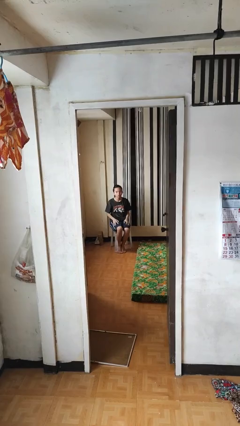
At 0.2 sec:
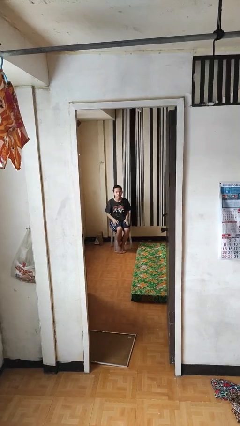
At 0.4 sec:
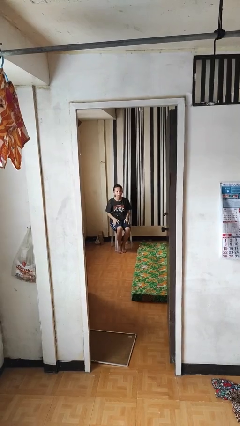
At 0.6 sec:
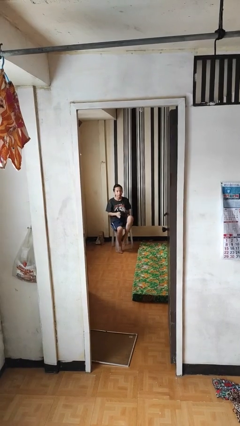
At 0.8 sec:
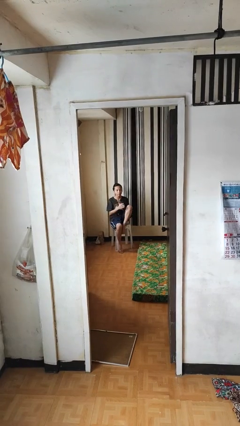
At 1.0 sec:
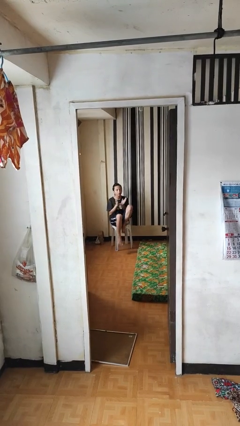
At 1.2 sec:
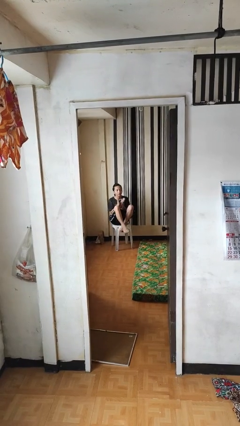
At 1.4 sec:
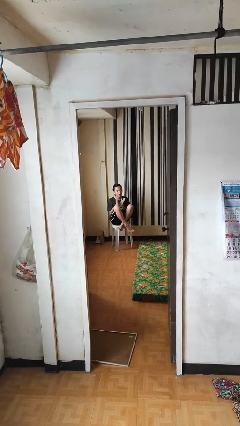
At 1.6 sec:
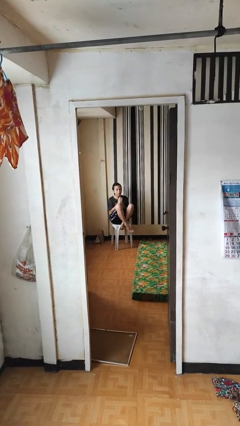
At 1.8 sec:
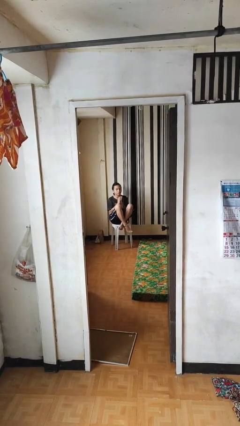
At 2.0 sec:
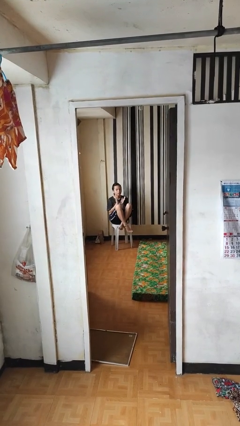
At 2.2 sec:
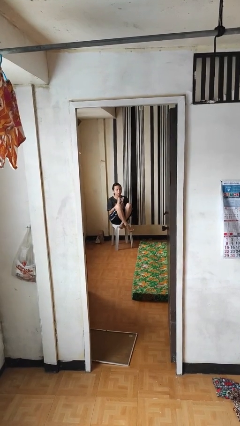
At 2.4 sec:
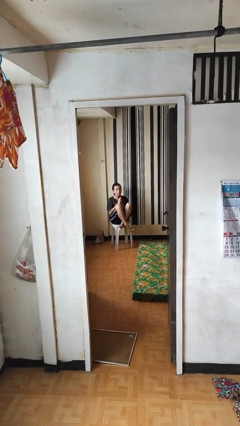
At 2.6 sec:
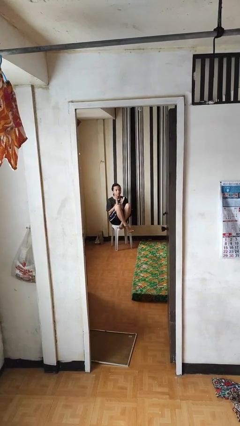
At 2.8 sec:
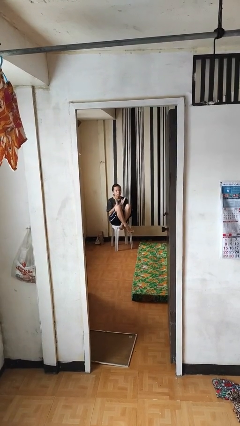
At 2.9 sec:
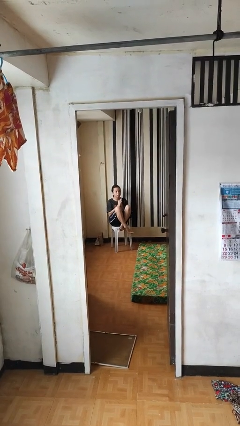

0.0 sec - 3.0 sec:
person claps hands

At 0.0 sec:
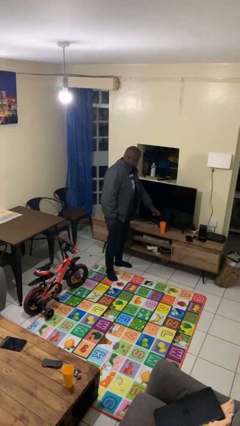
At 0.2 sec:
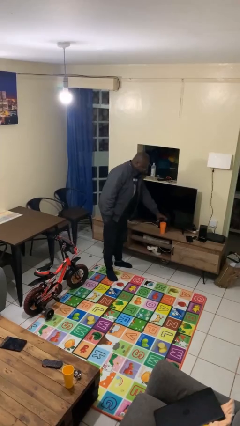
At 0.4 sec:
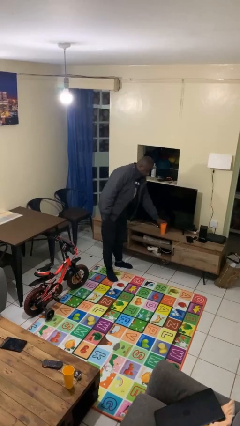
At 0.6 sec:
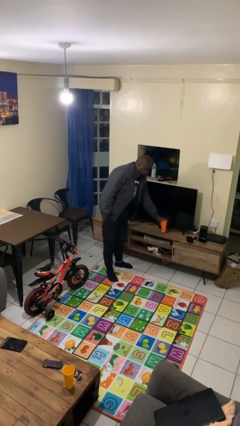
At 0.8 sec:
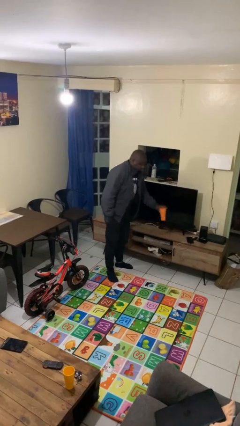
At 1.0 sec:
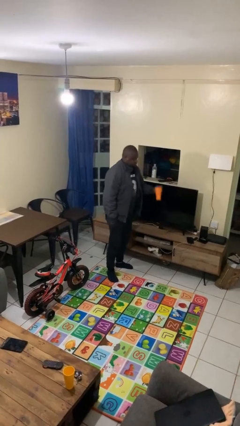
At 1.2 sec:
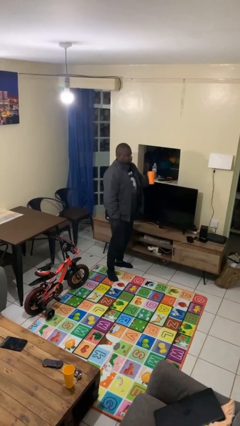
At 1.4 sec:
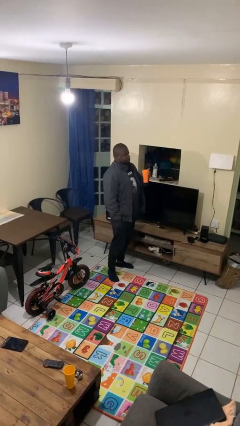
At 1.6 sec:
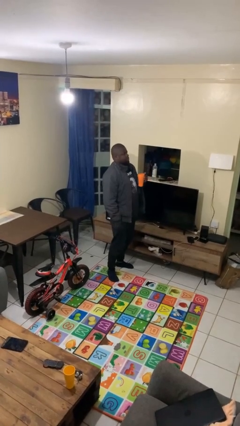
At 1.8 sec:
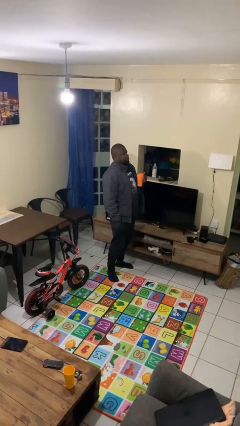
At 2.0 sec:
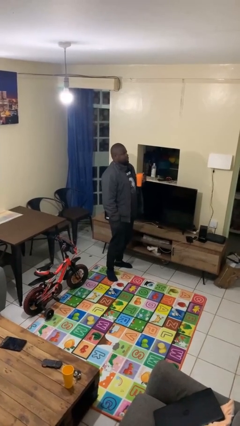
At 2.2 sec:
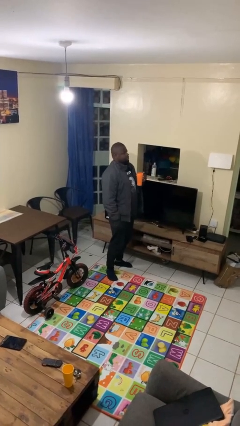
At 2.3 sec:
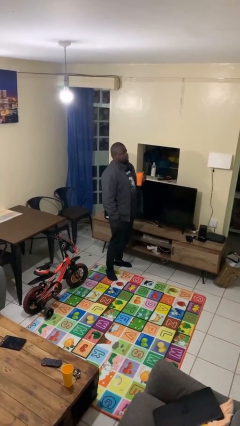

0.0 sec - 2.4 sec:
person picks up object from countertop

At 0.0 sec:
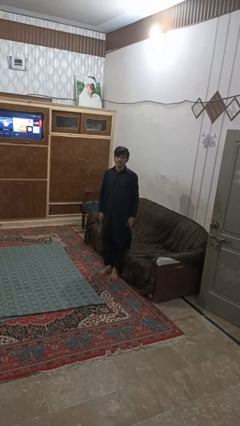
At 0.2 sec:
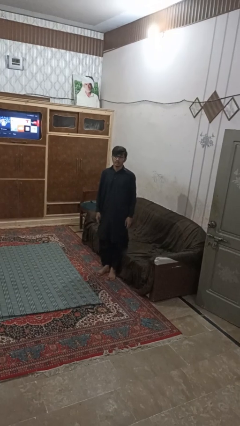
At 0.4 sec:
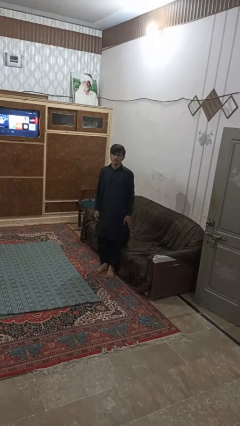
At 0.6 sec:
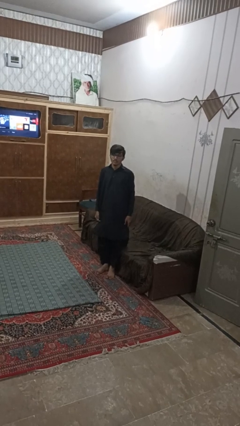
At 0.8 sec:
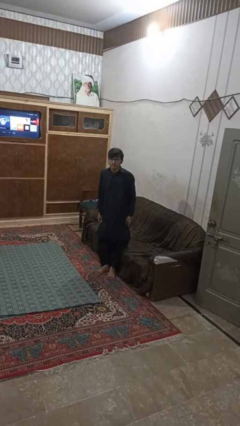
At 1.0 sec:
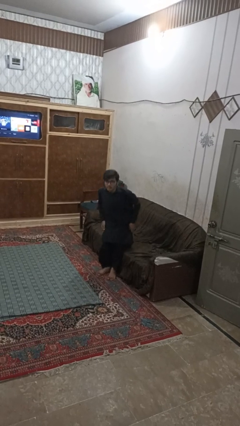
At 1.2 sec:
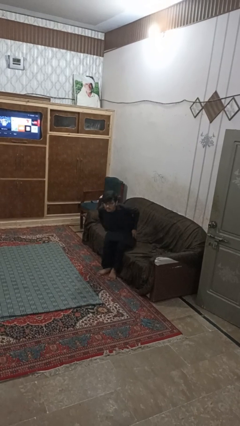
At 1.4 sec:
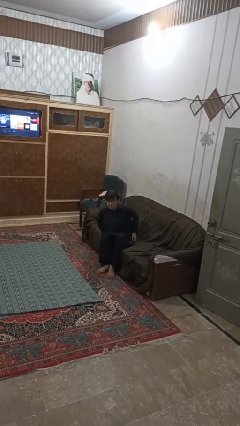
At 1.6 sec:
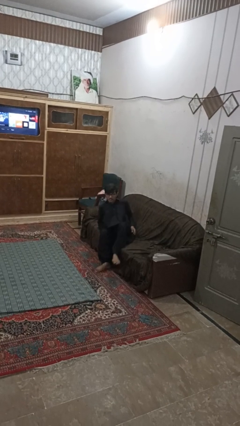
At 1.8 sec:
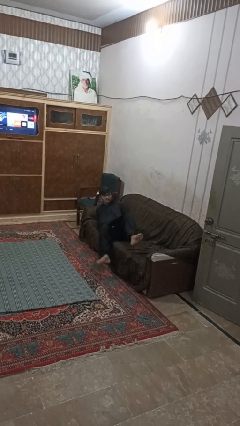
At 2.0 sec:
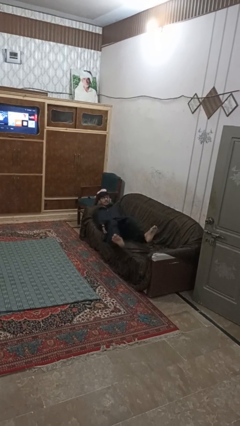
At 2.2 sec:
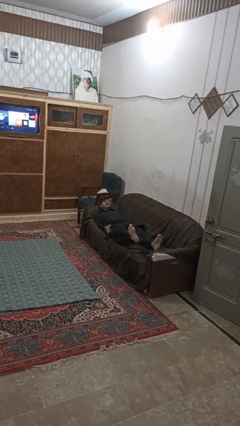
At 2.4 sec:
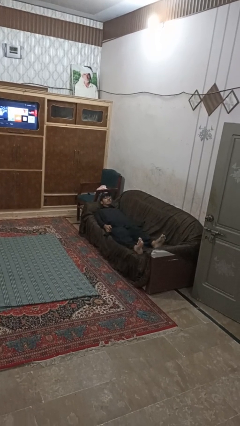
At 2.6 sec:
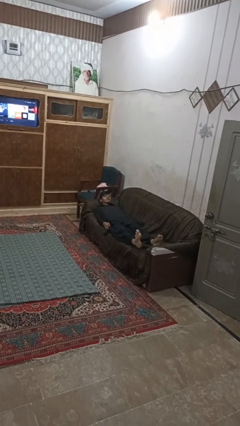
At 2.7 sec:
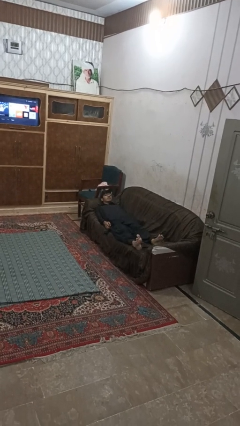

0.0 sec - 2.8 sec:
person lies down on couch

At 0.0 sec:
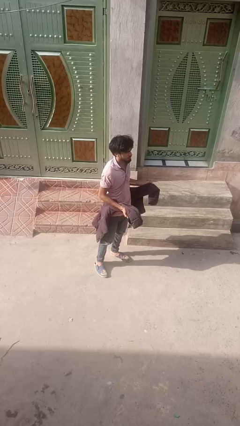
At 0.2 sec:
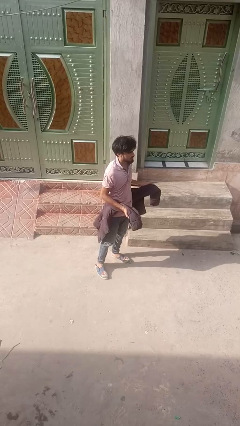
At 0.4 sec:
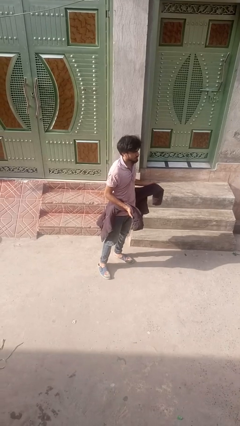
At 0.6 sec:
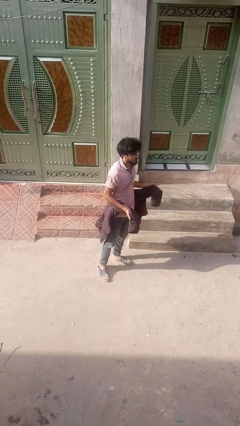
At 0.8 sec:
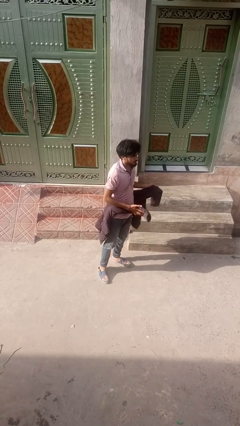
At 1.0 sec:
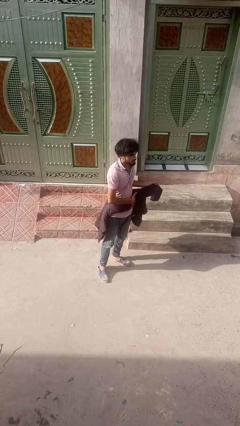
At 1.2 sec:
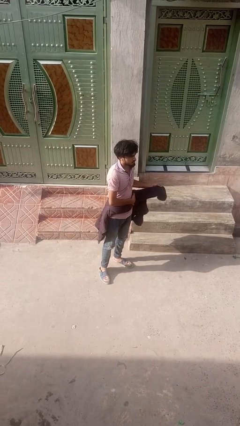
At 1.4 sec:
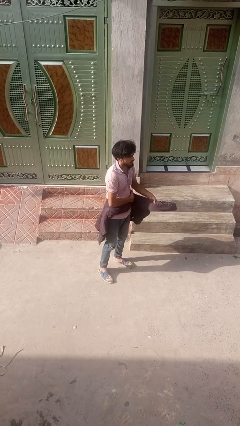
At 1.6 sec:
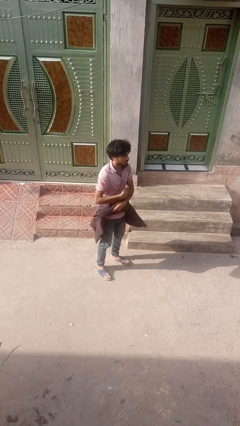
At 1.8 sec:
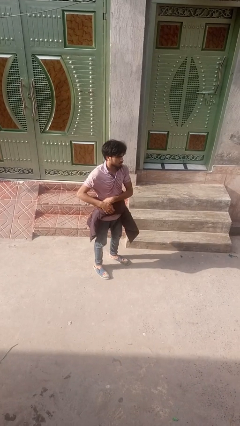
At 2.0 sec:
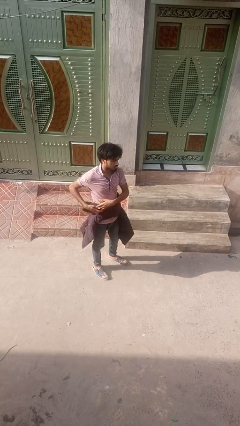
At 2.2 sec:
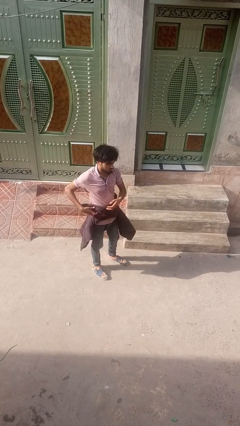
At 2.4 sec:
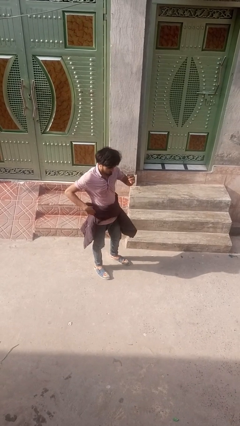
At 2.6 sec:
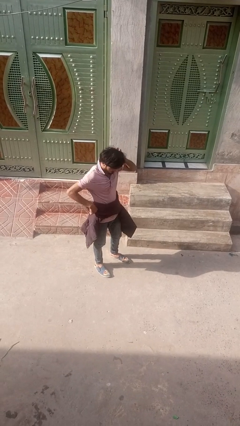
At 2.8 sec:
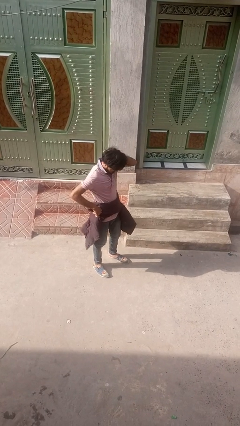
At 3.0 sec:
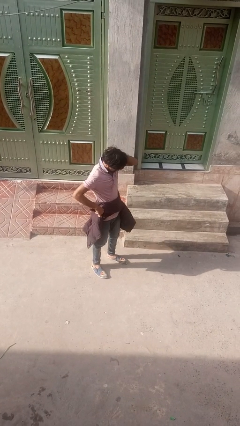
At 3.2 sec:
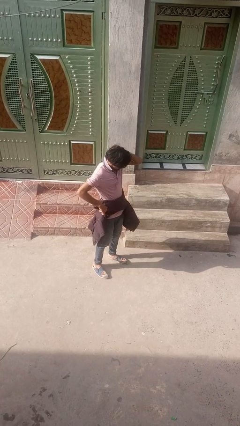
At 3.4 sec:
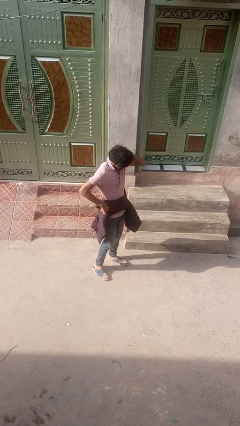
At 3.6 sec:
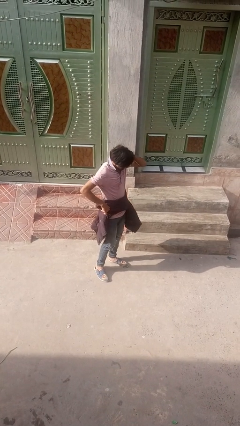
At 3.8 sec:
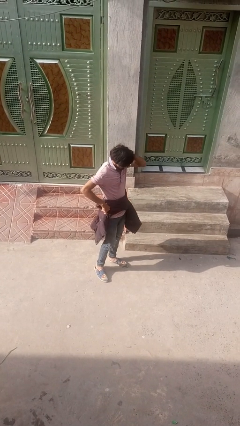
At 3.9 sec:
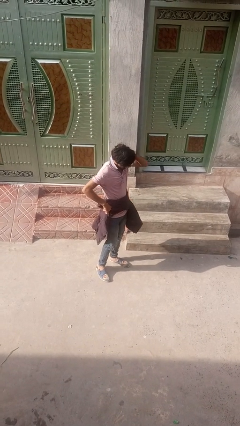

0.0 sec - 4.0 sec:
person ties jacket around waist

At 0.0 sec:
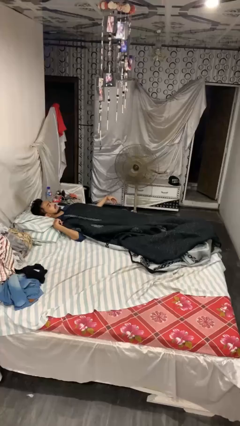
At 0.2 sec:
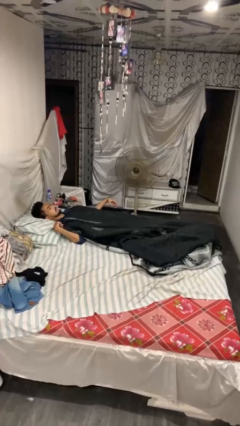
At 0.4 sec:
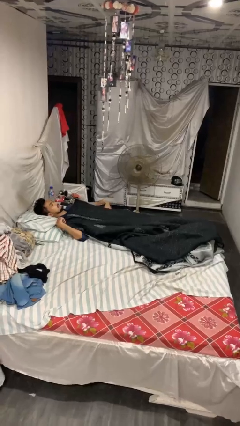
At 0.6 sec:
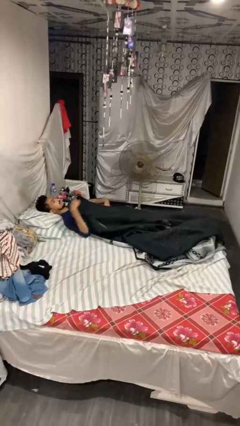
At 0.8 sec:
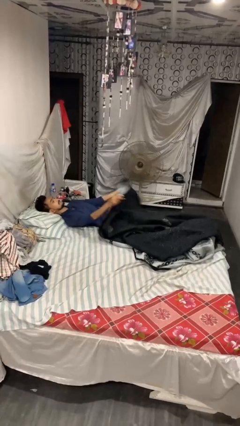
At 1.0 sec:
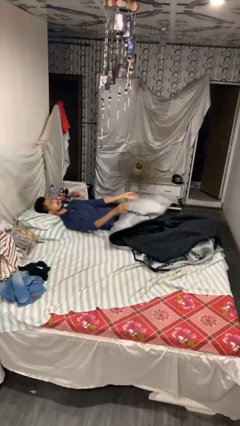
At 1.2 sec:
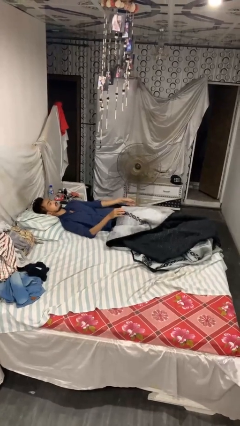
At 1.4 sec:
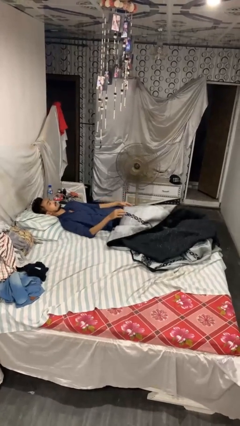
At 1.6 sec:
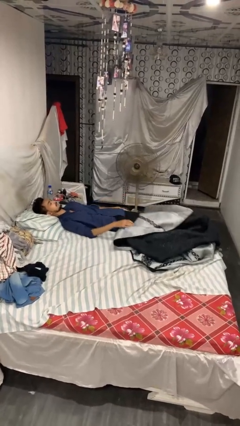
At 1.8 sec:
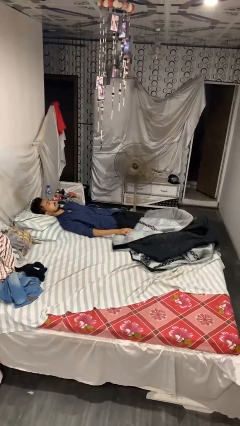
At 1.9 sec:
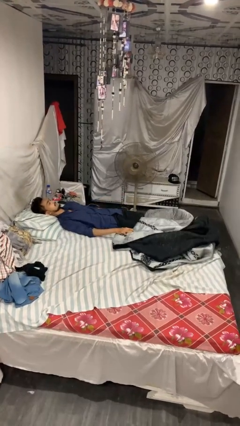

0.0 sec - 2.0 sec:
person uncovers with blanket

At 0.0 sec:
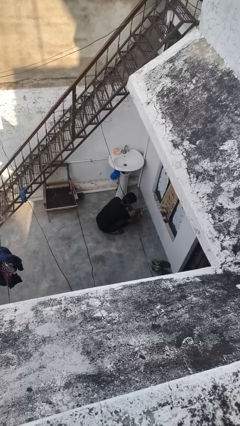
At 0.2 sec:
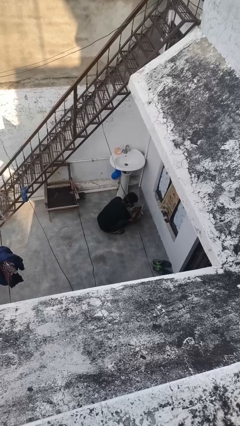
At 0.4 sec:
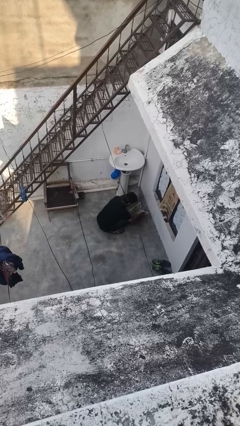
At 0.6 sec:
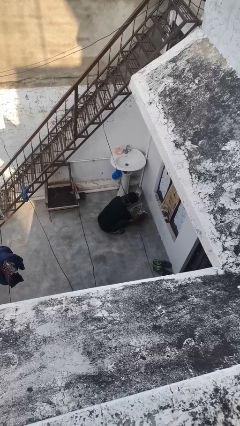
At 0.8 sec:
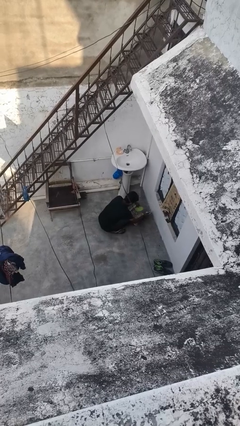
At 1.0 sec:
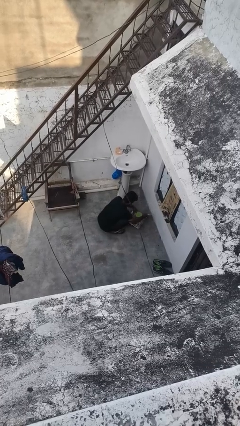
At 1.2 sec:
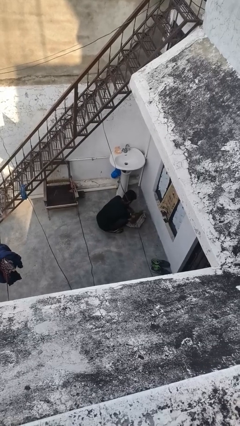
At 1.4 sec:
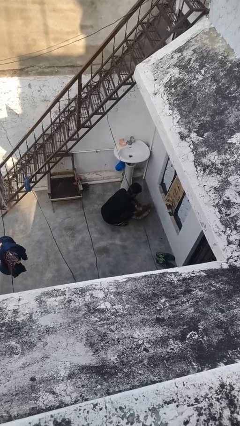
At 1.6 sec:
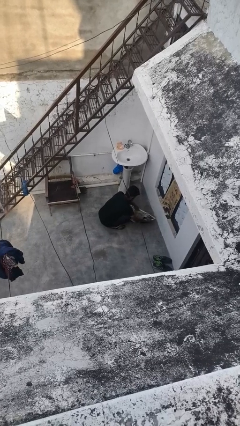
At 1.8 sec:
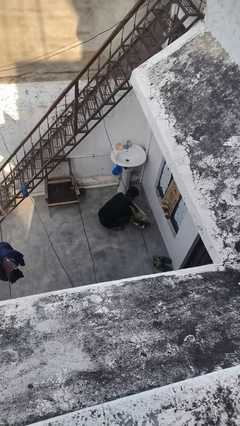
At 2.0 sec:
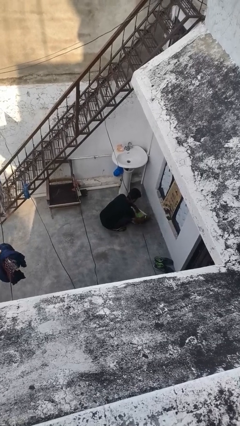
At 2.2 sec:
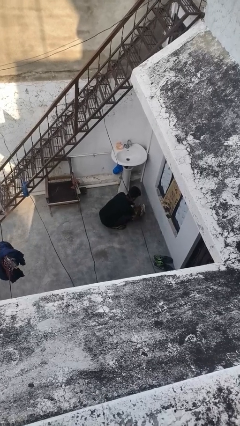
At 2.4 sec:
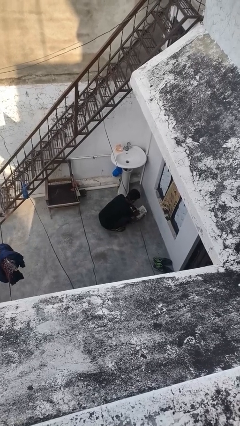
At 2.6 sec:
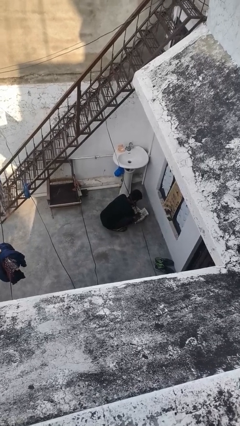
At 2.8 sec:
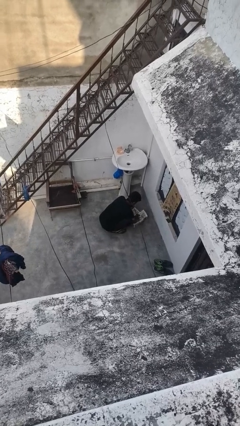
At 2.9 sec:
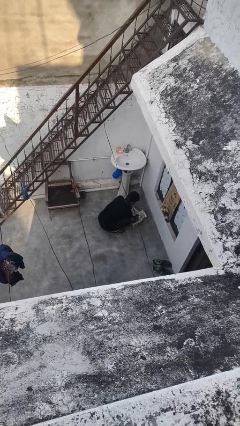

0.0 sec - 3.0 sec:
person wraps box

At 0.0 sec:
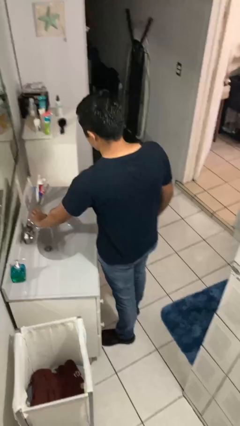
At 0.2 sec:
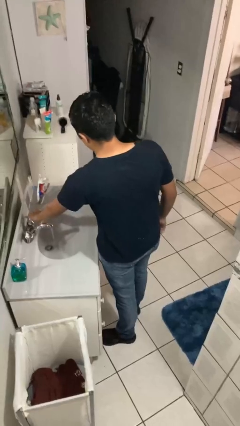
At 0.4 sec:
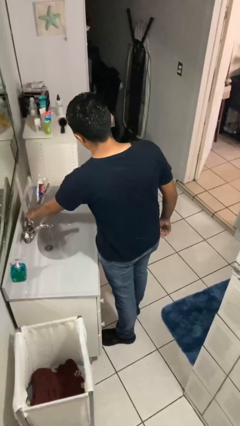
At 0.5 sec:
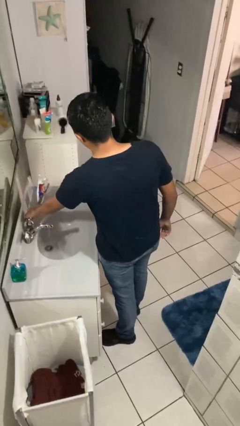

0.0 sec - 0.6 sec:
person turns off faucet
